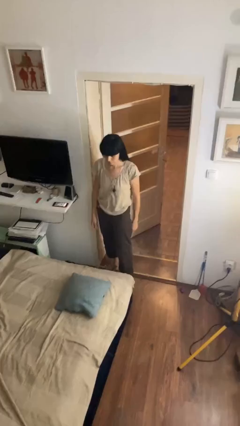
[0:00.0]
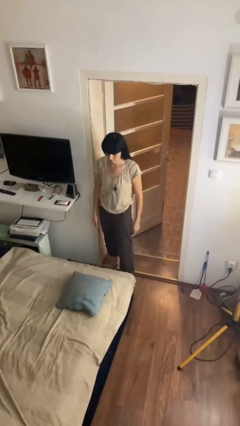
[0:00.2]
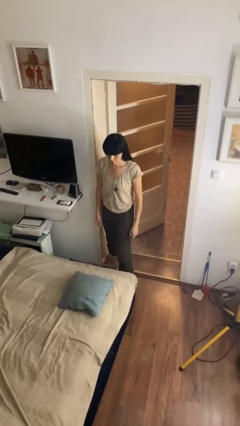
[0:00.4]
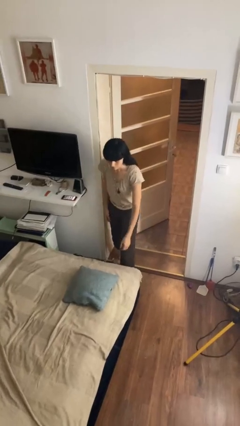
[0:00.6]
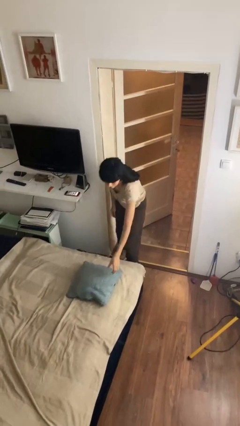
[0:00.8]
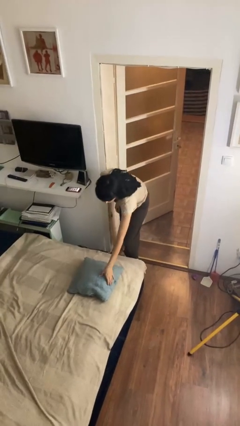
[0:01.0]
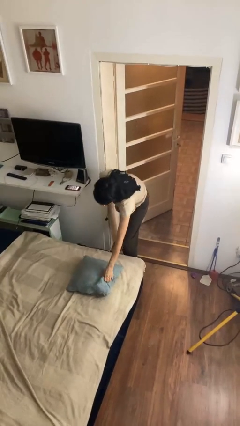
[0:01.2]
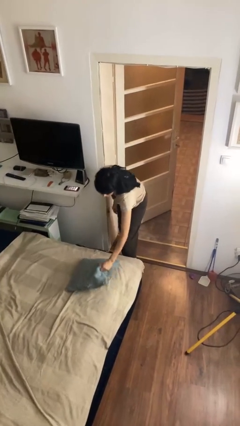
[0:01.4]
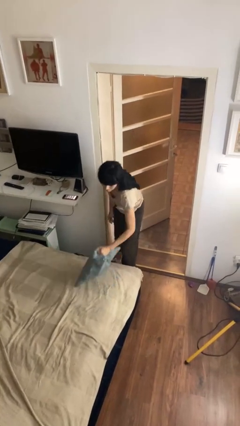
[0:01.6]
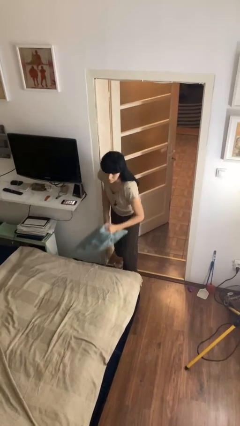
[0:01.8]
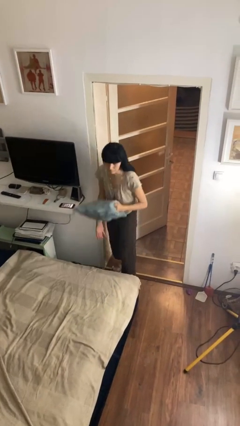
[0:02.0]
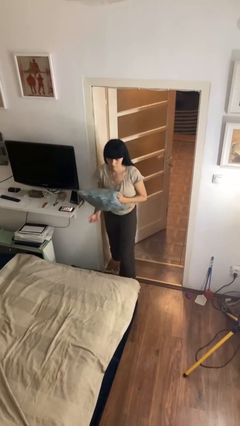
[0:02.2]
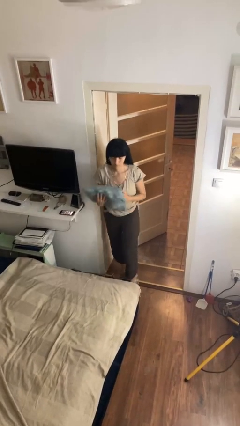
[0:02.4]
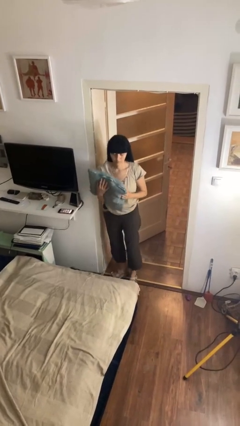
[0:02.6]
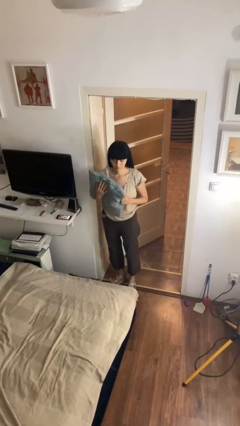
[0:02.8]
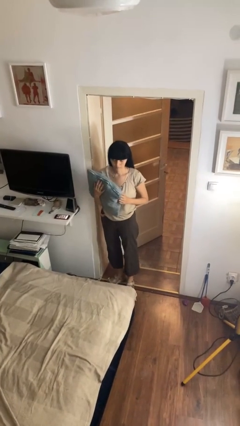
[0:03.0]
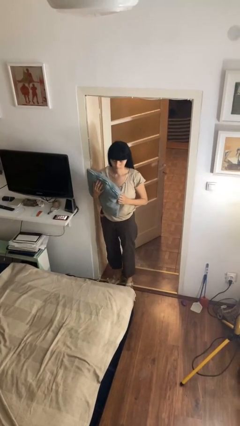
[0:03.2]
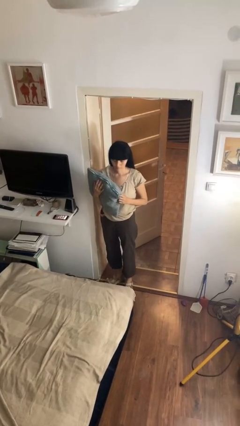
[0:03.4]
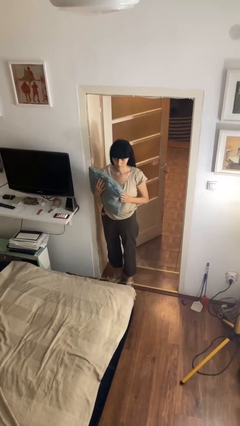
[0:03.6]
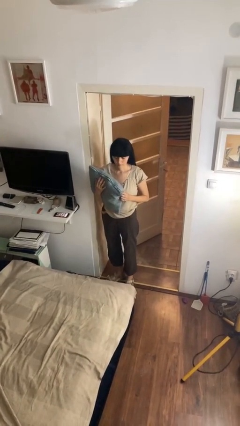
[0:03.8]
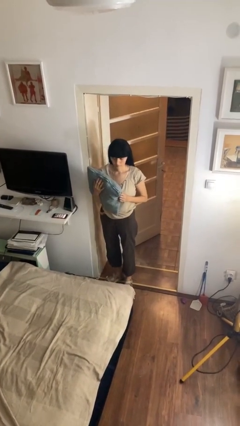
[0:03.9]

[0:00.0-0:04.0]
person picks up object from bed

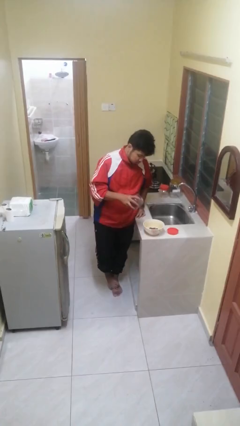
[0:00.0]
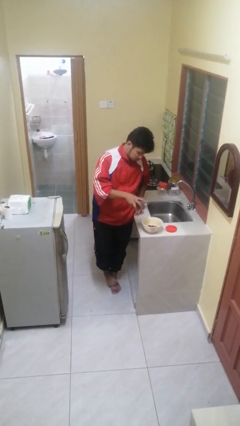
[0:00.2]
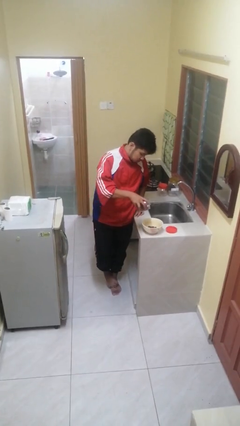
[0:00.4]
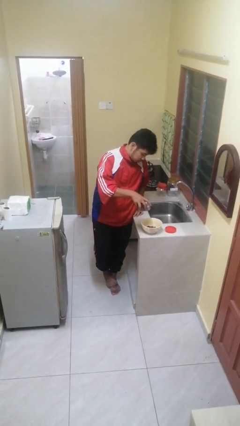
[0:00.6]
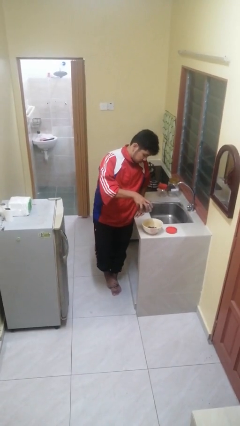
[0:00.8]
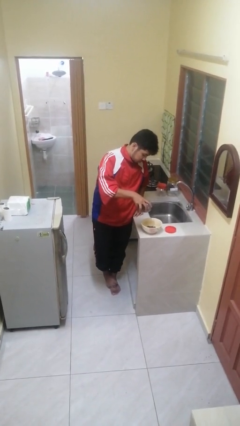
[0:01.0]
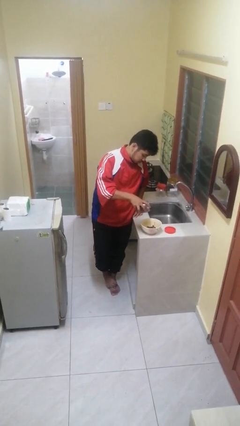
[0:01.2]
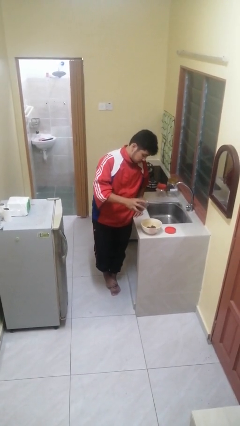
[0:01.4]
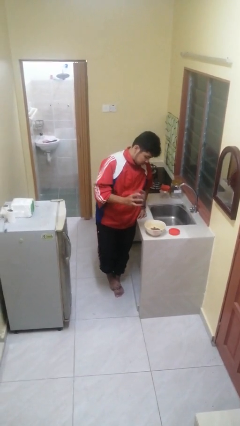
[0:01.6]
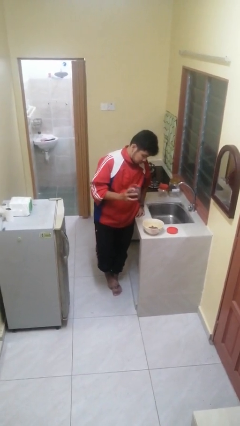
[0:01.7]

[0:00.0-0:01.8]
person pours into bowl

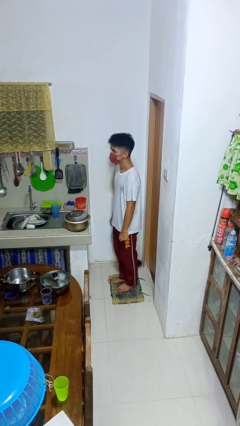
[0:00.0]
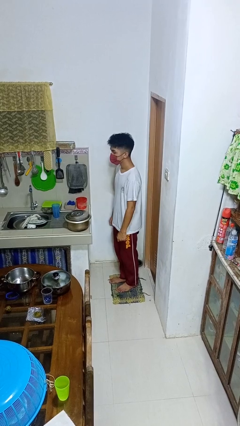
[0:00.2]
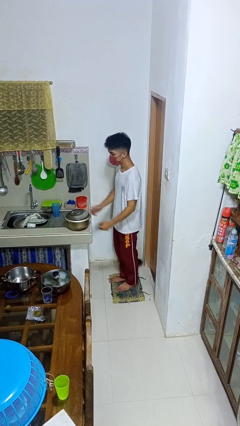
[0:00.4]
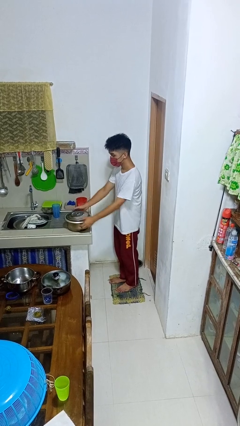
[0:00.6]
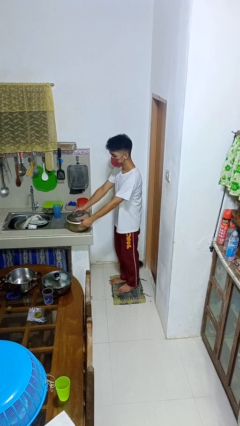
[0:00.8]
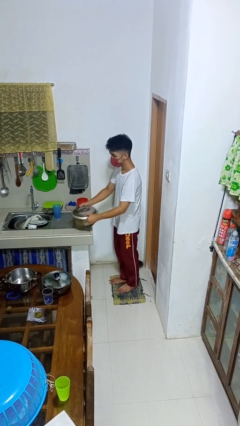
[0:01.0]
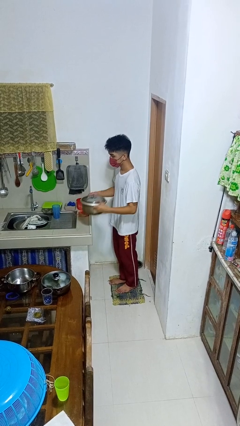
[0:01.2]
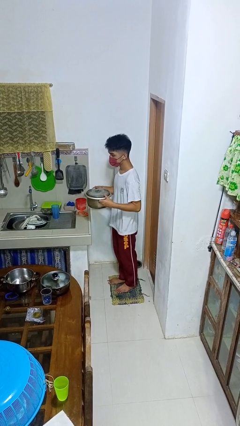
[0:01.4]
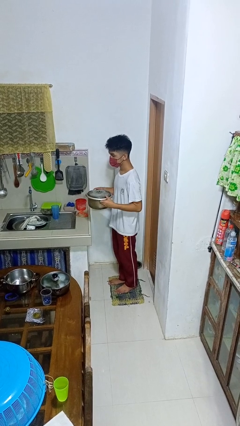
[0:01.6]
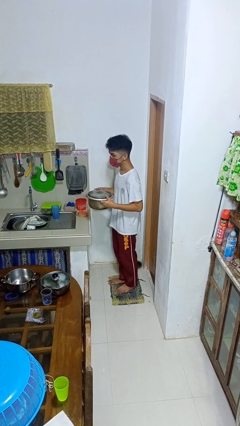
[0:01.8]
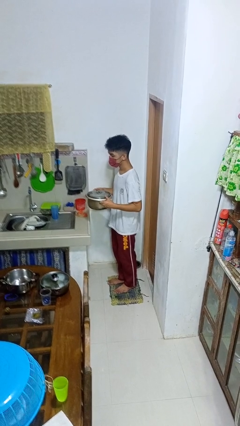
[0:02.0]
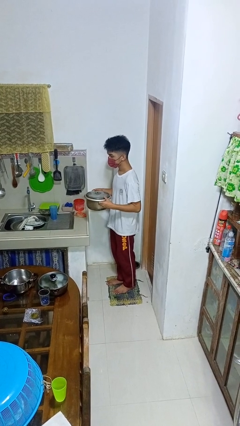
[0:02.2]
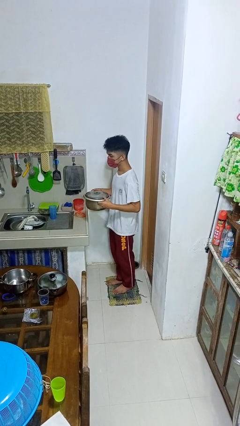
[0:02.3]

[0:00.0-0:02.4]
person picks up object from countertop

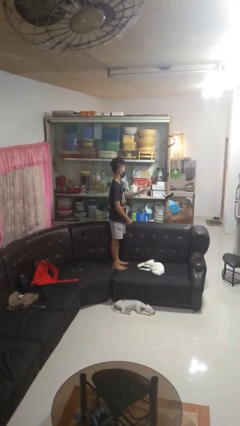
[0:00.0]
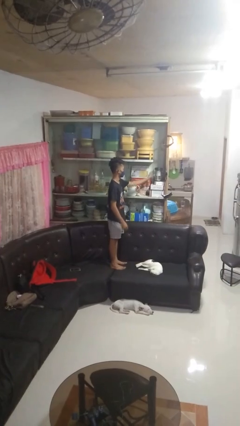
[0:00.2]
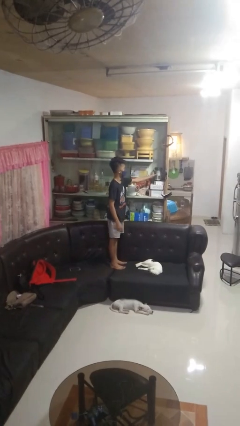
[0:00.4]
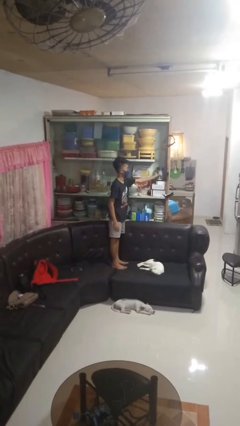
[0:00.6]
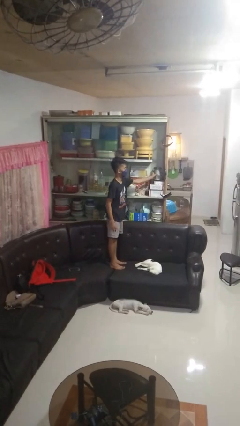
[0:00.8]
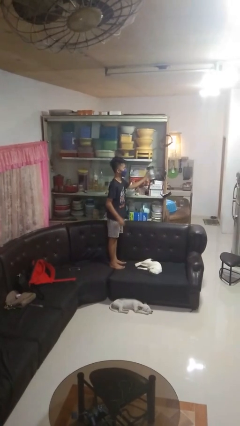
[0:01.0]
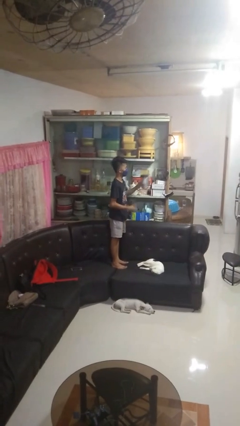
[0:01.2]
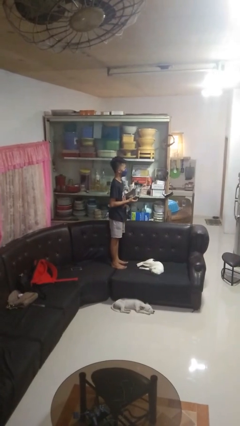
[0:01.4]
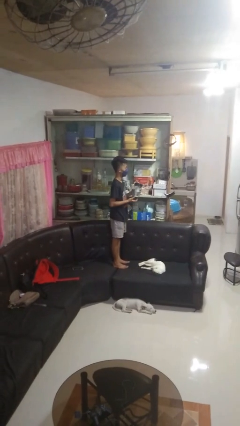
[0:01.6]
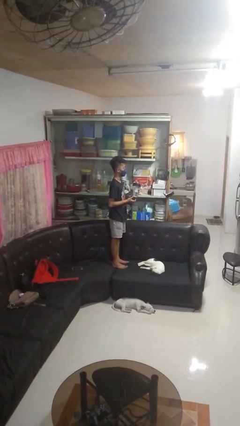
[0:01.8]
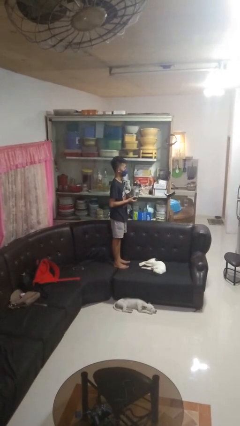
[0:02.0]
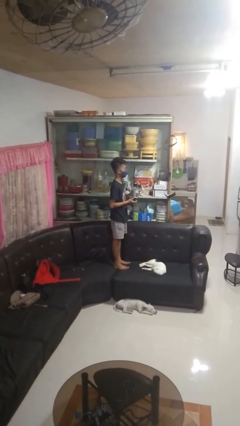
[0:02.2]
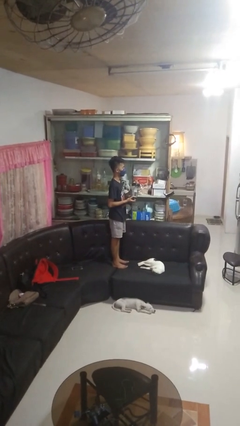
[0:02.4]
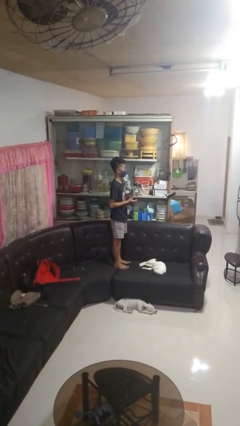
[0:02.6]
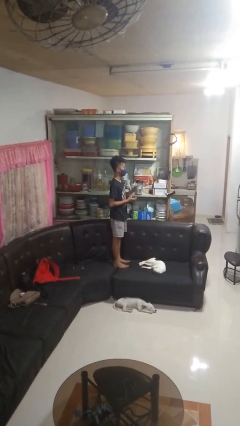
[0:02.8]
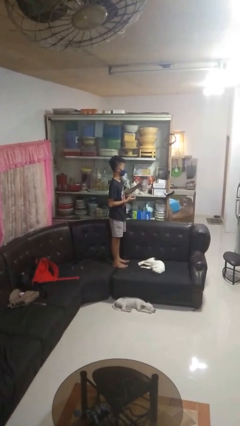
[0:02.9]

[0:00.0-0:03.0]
person picks up object from cabinet

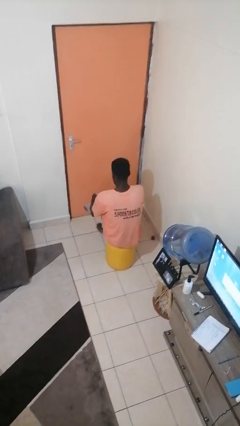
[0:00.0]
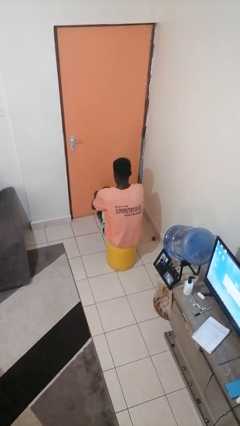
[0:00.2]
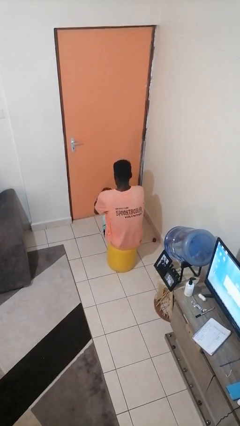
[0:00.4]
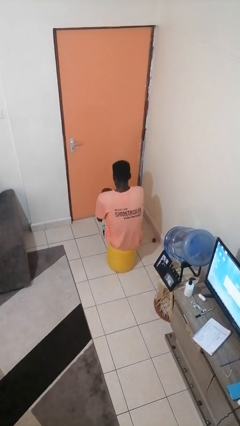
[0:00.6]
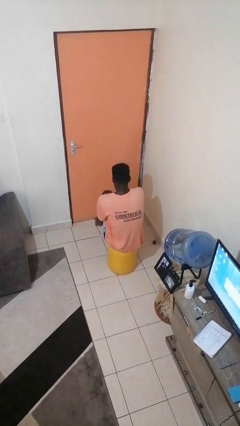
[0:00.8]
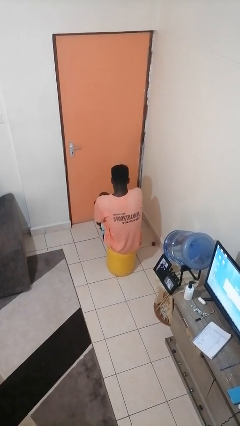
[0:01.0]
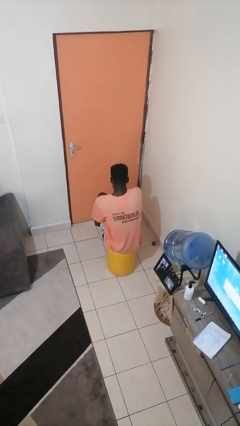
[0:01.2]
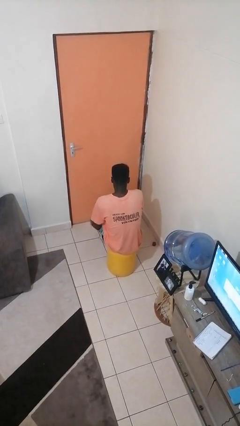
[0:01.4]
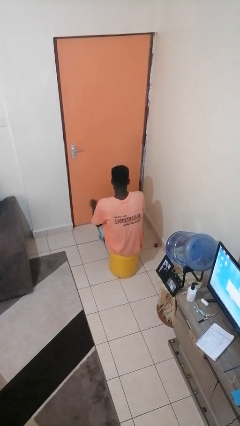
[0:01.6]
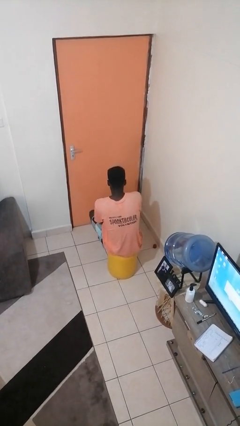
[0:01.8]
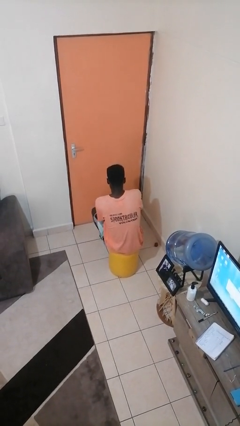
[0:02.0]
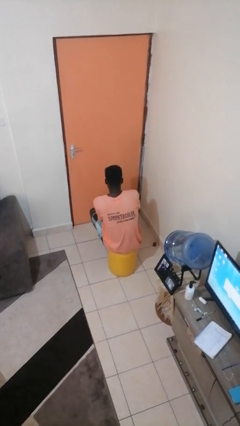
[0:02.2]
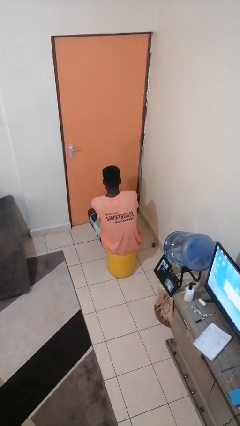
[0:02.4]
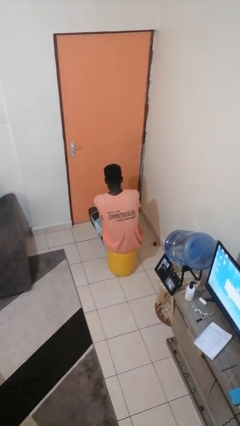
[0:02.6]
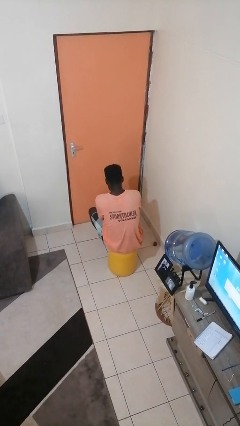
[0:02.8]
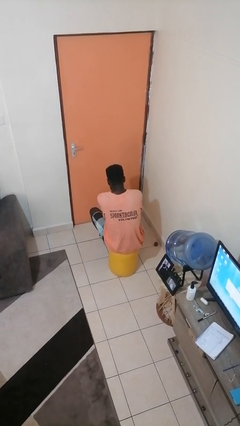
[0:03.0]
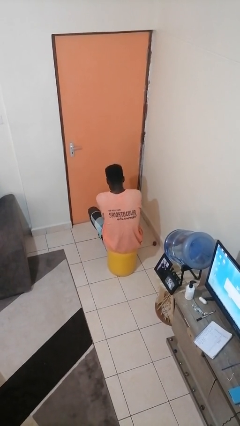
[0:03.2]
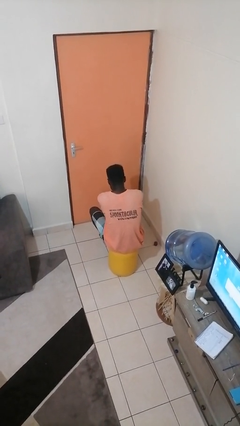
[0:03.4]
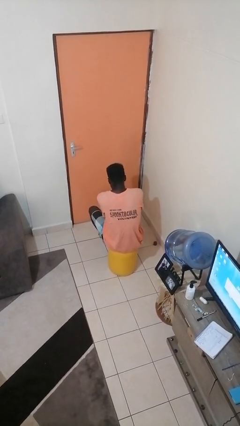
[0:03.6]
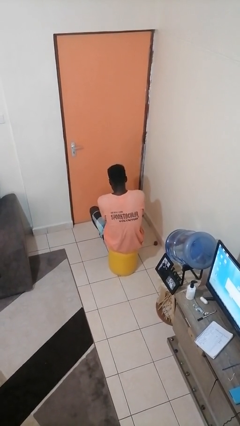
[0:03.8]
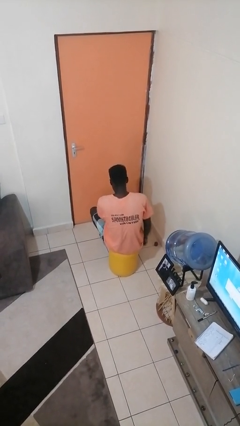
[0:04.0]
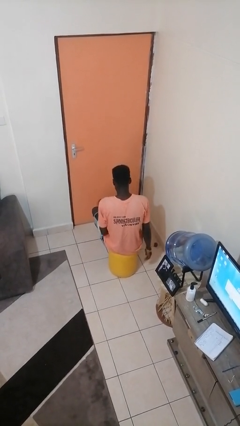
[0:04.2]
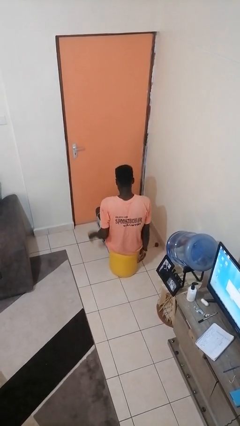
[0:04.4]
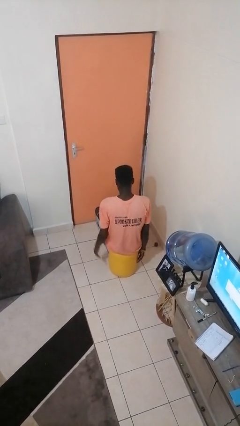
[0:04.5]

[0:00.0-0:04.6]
person puts on socks

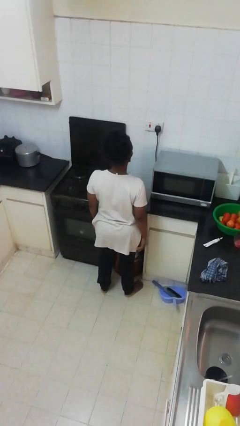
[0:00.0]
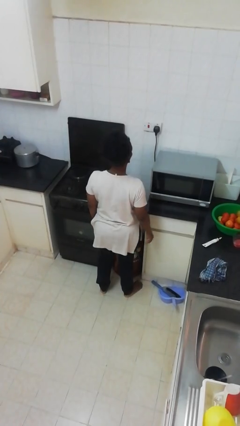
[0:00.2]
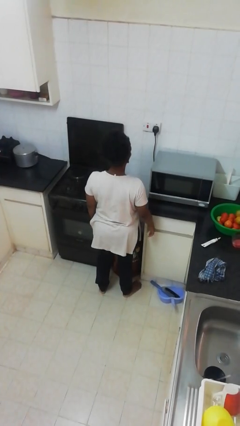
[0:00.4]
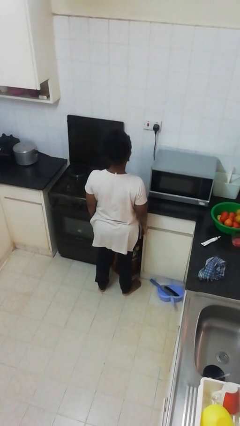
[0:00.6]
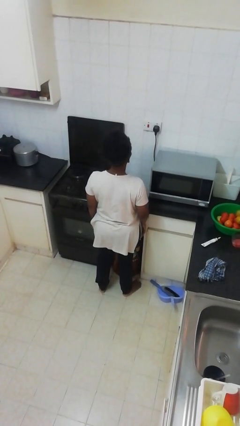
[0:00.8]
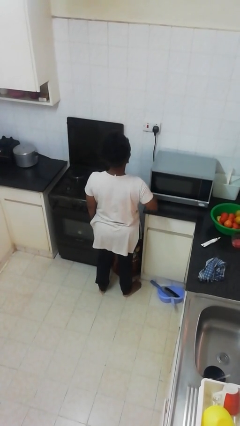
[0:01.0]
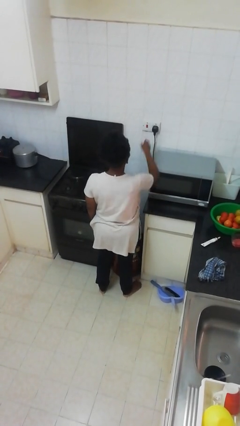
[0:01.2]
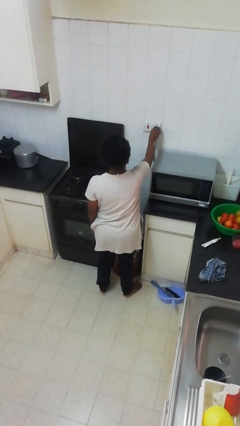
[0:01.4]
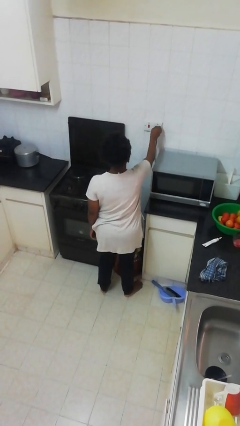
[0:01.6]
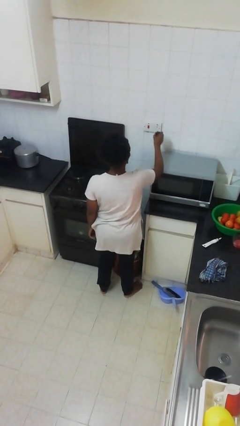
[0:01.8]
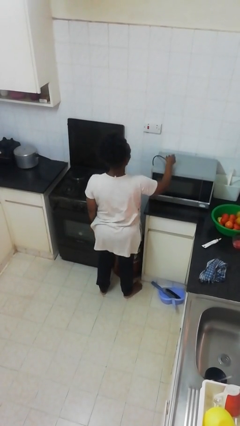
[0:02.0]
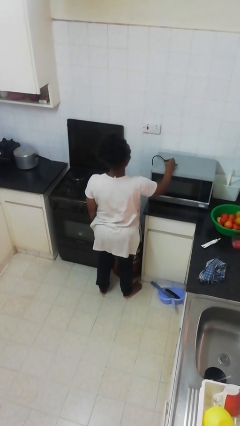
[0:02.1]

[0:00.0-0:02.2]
person unplugs from electrical socket
